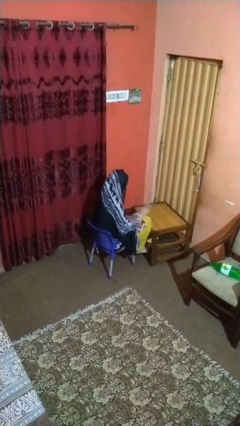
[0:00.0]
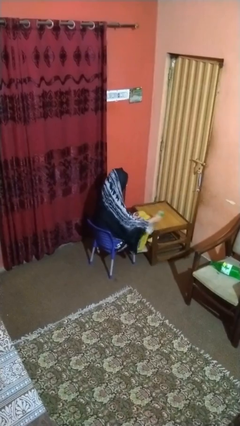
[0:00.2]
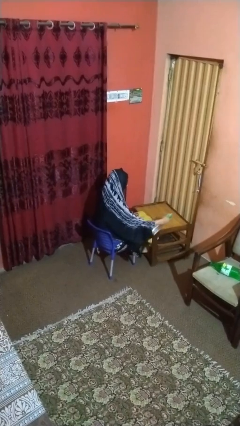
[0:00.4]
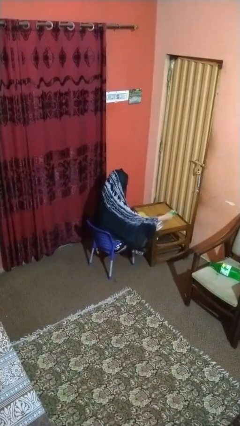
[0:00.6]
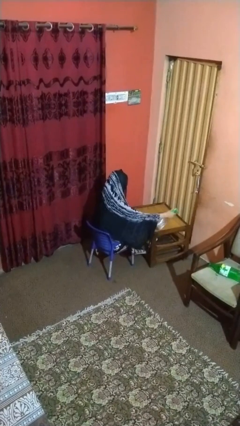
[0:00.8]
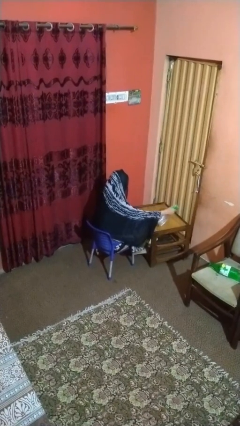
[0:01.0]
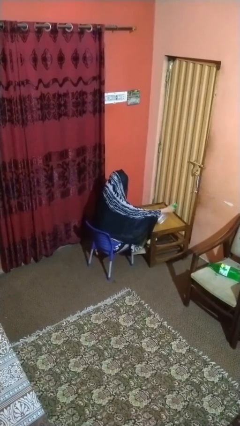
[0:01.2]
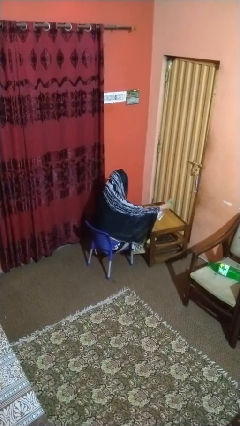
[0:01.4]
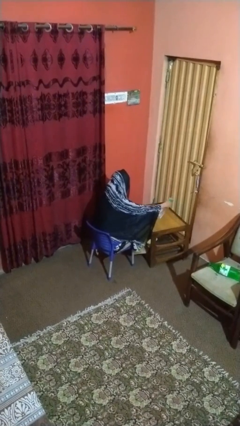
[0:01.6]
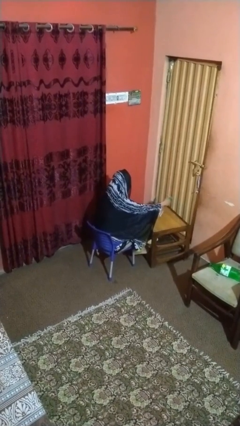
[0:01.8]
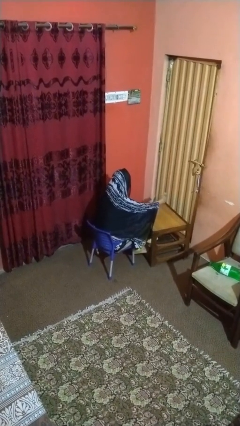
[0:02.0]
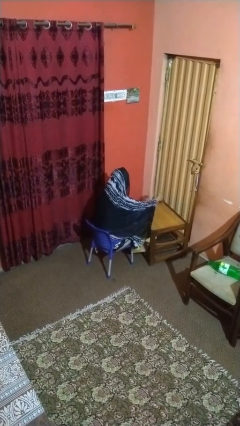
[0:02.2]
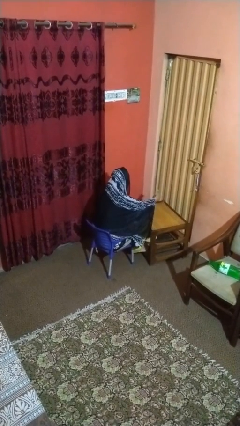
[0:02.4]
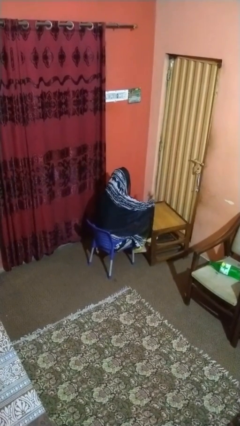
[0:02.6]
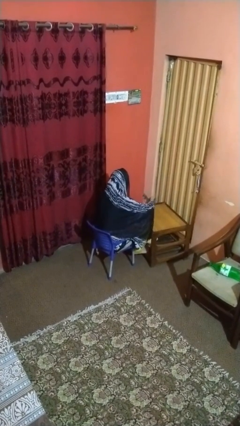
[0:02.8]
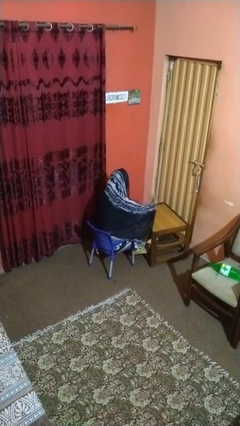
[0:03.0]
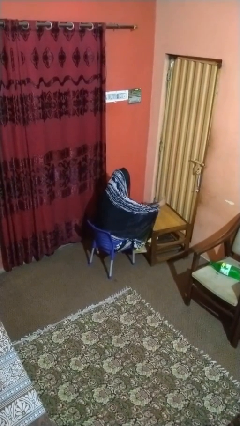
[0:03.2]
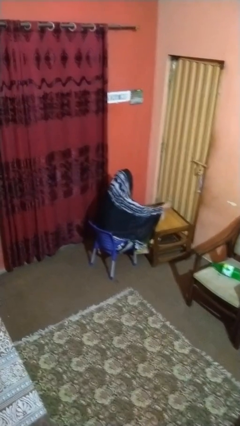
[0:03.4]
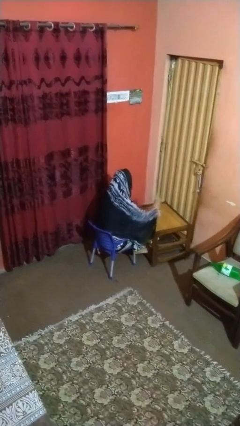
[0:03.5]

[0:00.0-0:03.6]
person sprays from bottle

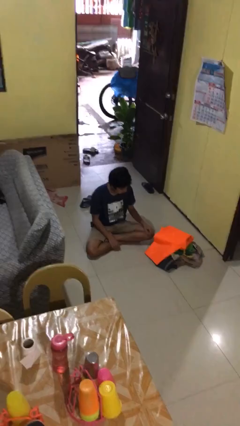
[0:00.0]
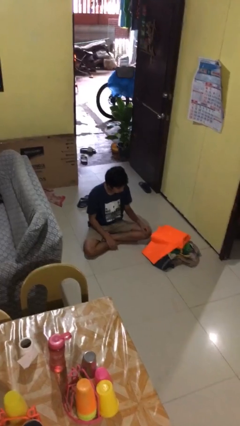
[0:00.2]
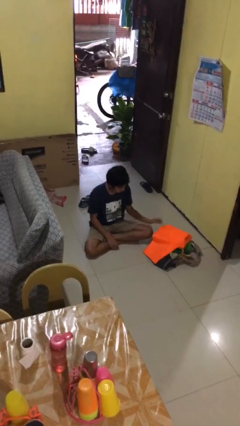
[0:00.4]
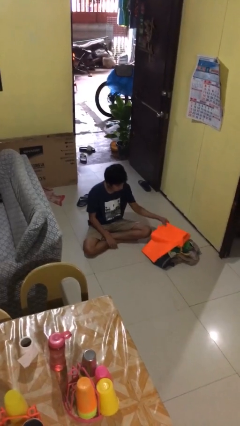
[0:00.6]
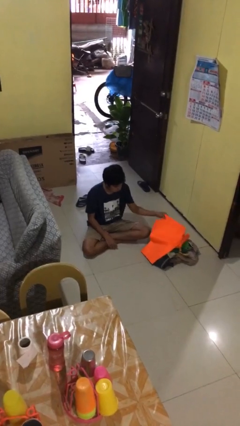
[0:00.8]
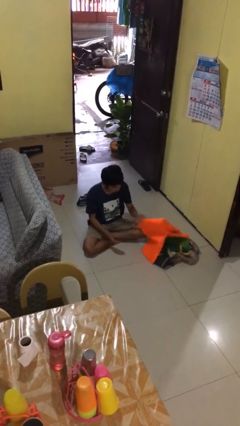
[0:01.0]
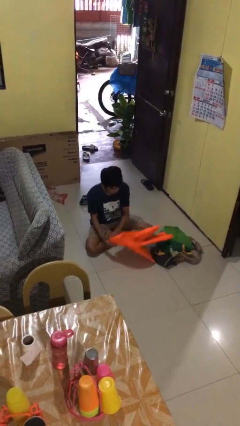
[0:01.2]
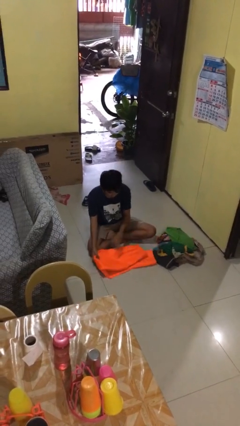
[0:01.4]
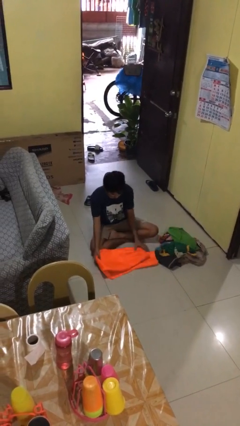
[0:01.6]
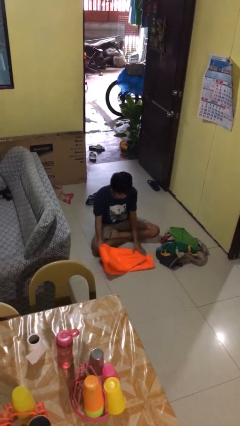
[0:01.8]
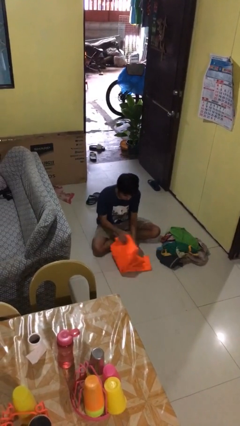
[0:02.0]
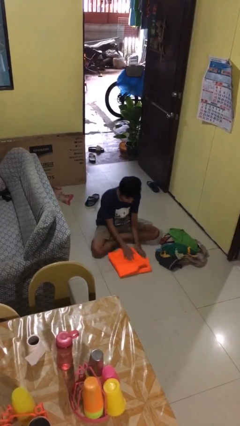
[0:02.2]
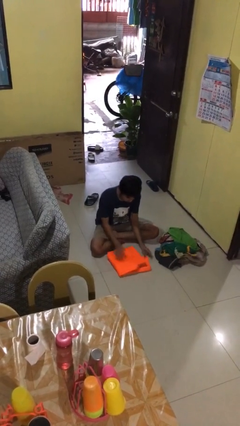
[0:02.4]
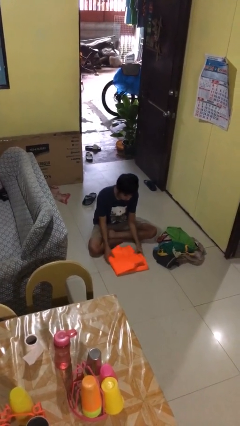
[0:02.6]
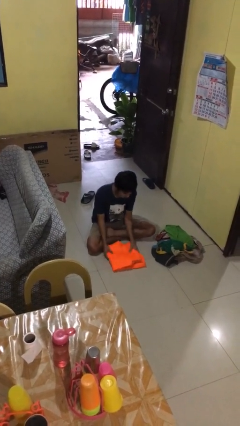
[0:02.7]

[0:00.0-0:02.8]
person folds pants

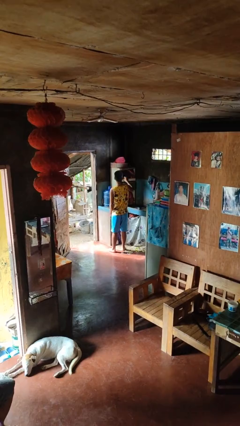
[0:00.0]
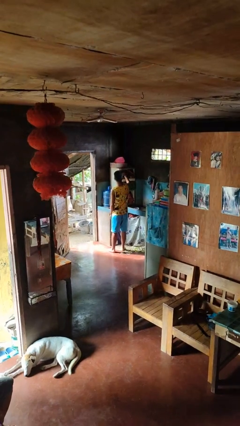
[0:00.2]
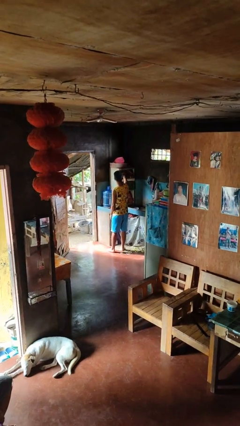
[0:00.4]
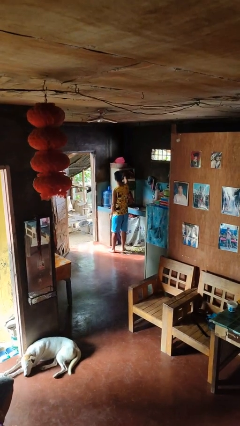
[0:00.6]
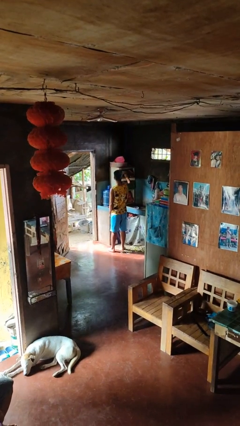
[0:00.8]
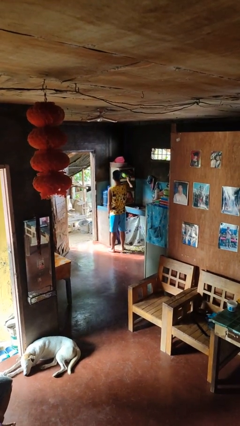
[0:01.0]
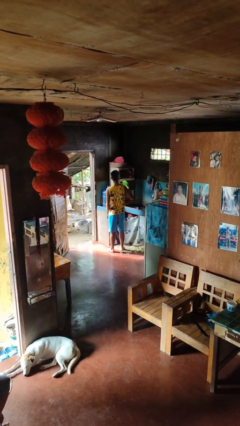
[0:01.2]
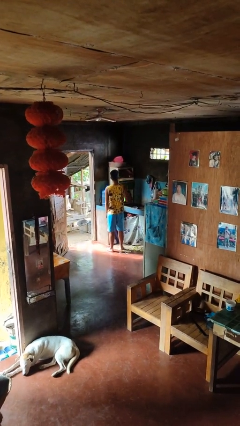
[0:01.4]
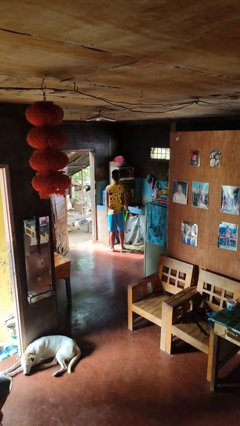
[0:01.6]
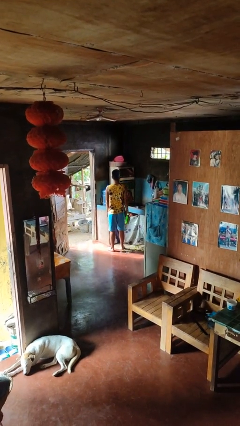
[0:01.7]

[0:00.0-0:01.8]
person takes object from cabinet

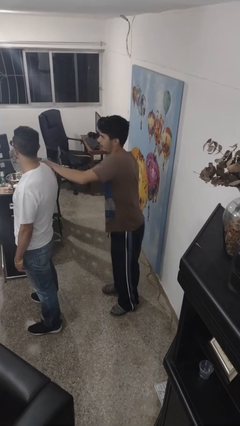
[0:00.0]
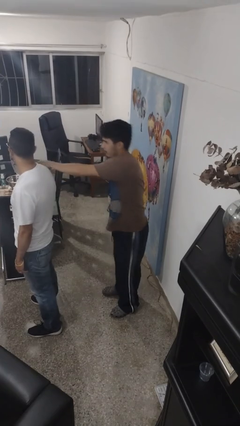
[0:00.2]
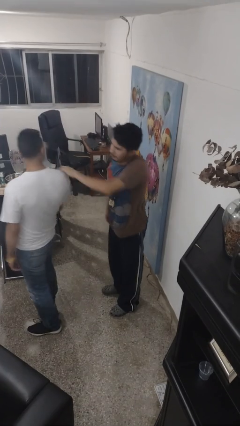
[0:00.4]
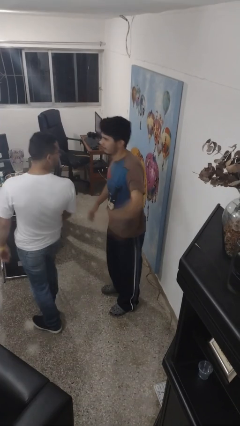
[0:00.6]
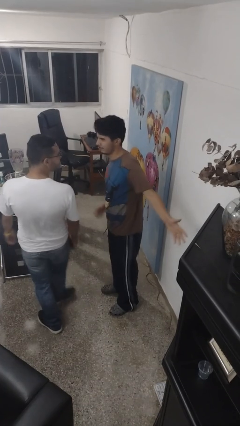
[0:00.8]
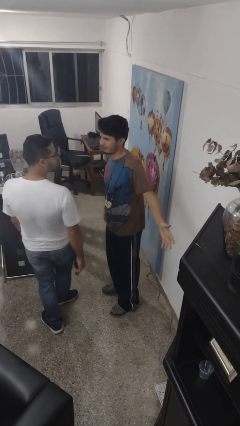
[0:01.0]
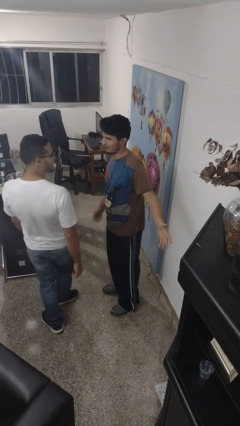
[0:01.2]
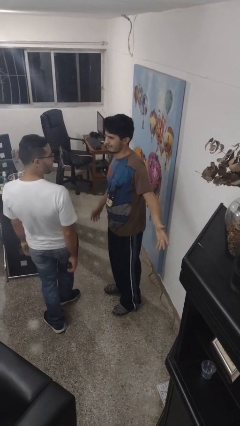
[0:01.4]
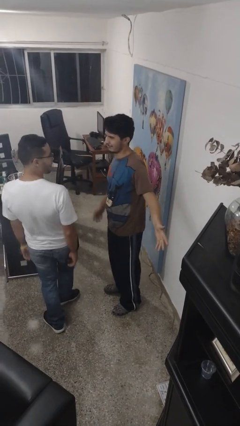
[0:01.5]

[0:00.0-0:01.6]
person spins person around

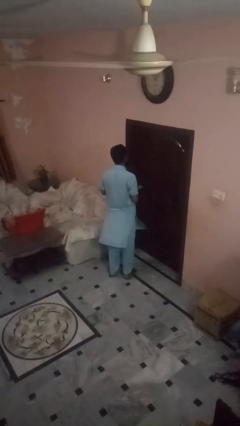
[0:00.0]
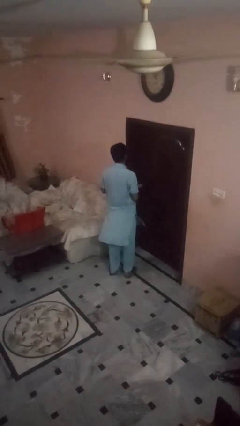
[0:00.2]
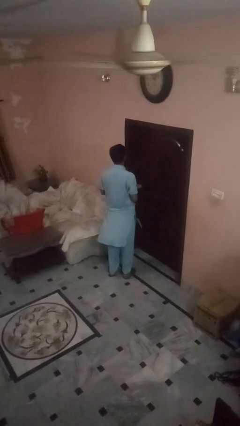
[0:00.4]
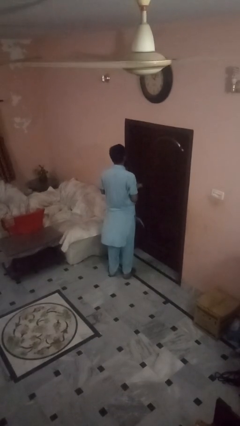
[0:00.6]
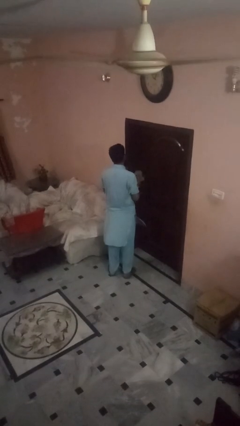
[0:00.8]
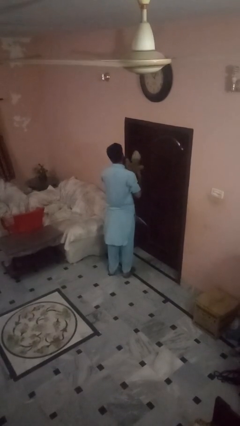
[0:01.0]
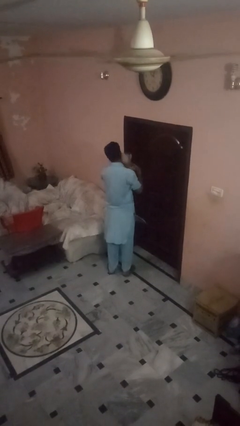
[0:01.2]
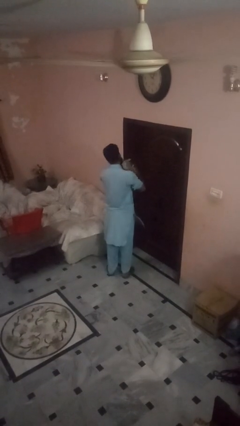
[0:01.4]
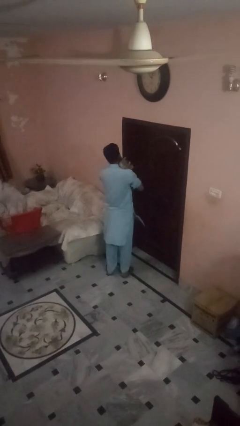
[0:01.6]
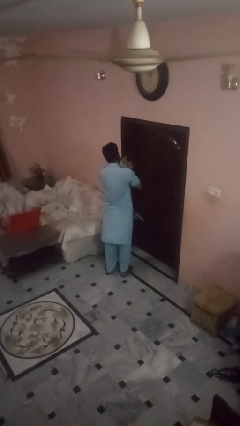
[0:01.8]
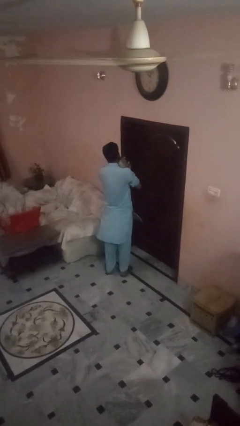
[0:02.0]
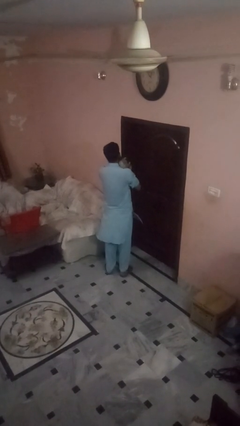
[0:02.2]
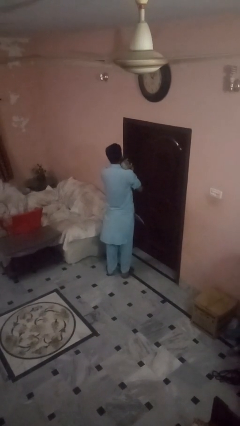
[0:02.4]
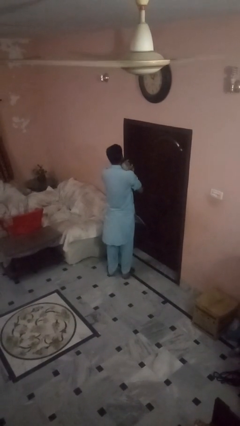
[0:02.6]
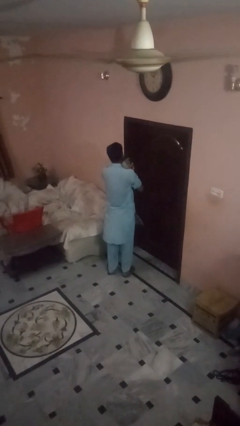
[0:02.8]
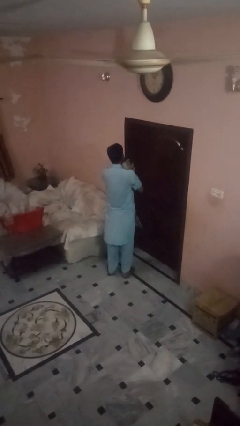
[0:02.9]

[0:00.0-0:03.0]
person hugs stuffed animal

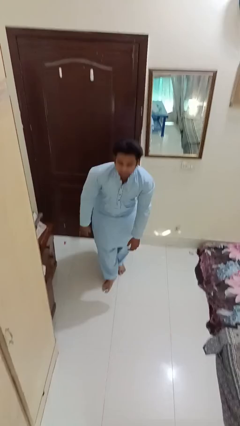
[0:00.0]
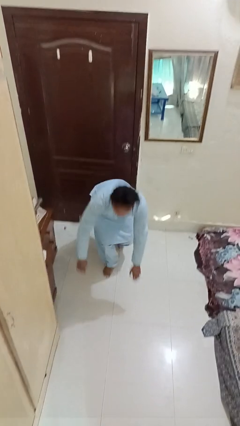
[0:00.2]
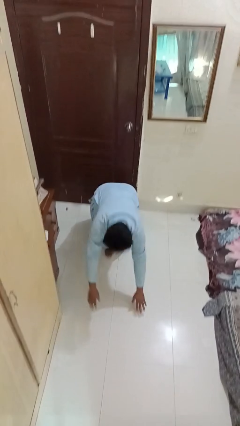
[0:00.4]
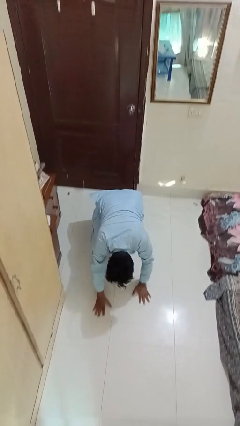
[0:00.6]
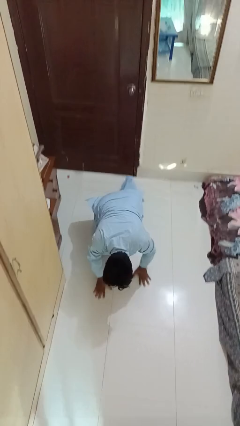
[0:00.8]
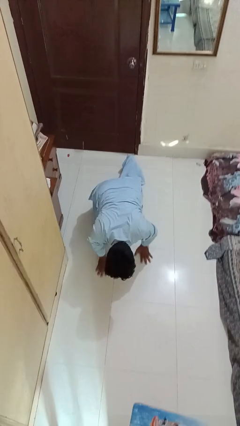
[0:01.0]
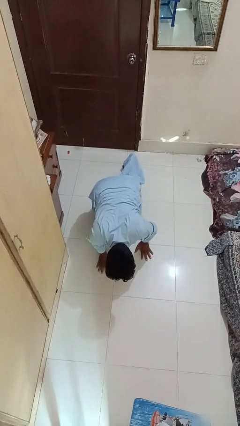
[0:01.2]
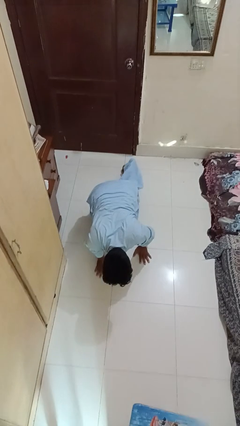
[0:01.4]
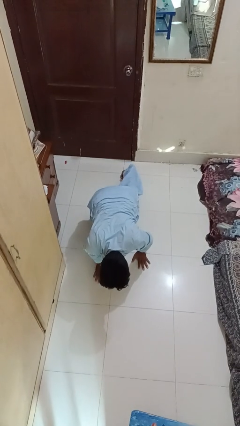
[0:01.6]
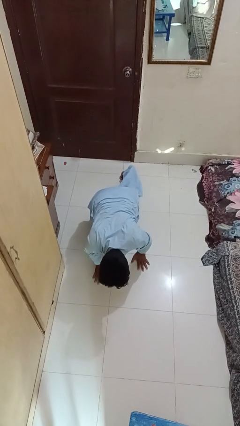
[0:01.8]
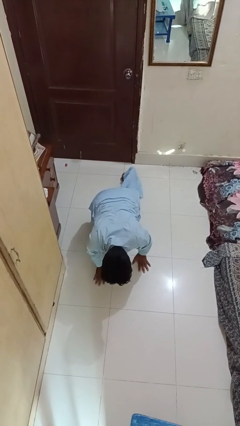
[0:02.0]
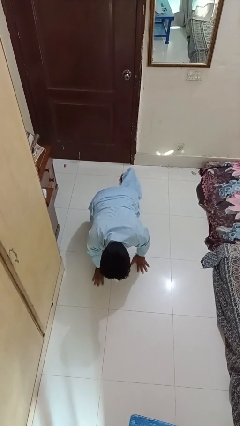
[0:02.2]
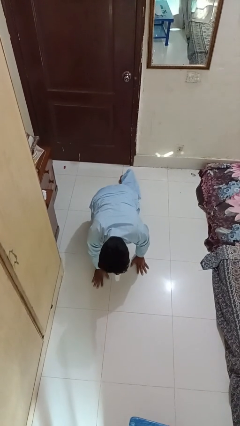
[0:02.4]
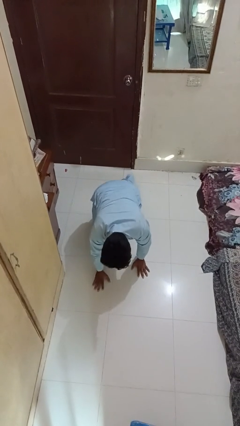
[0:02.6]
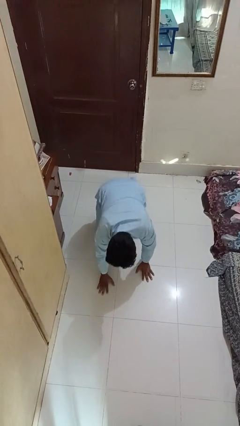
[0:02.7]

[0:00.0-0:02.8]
person trips on object on floor

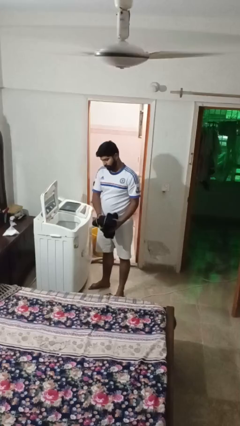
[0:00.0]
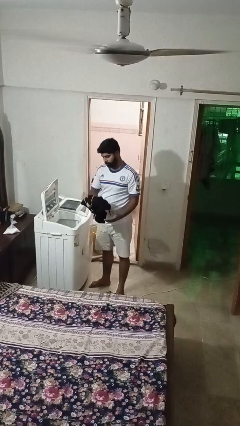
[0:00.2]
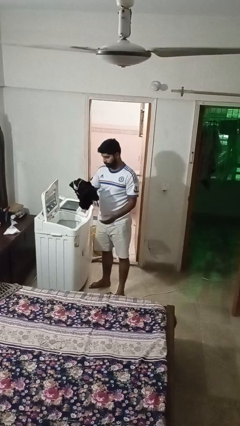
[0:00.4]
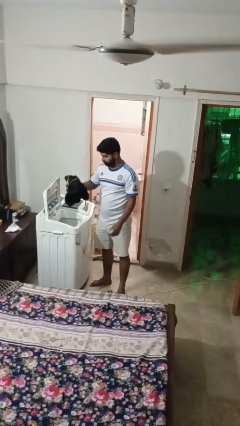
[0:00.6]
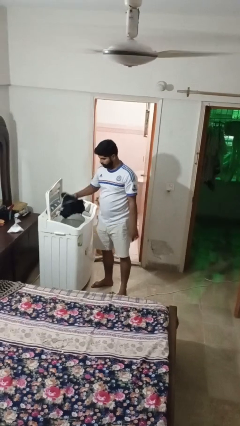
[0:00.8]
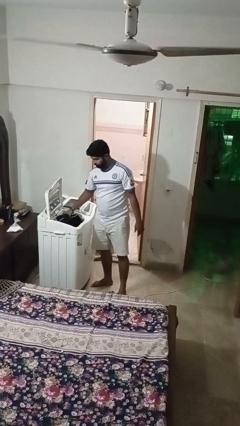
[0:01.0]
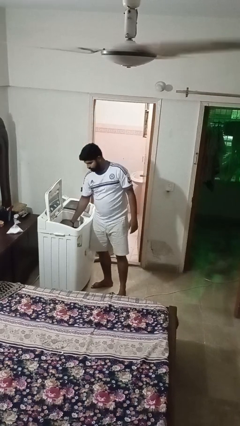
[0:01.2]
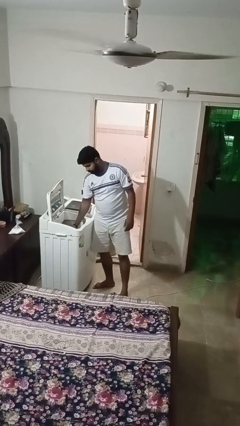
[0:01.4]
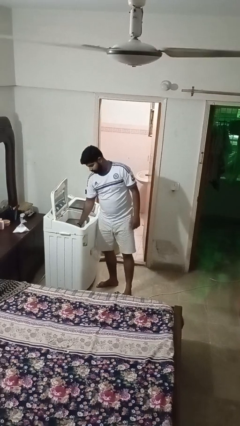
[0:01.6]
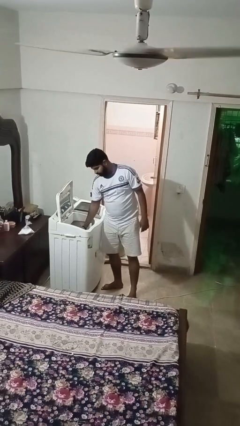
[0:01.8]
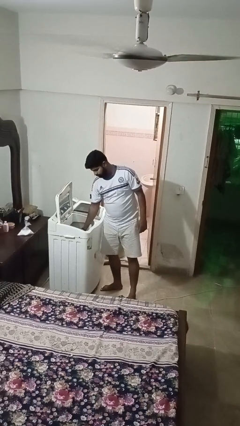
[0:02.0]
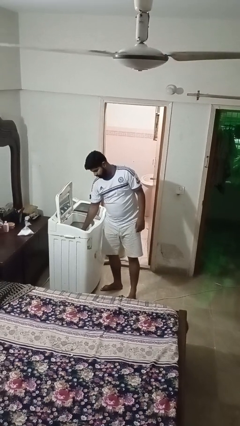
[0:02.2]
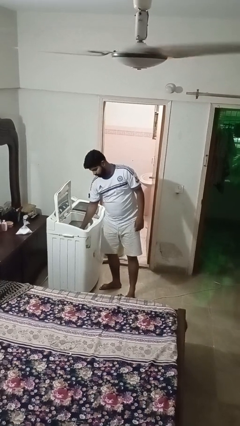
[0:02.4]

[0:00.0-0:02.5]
person loads clotheswasher
